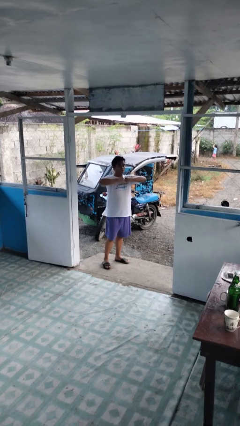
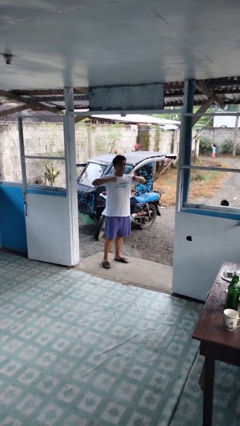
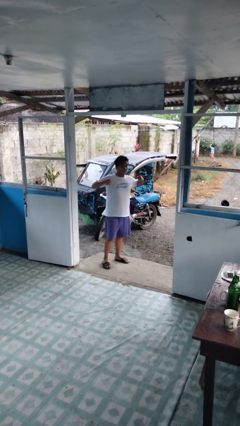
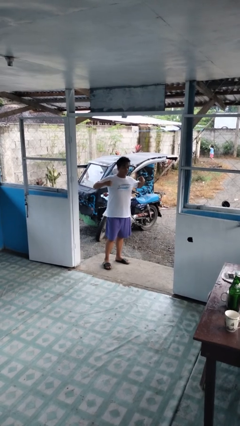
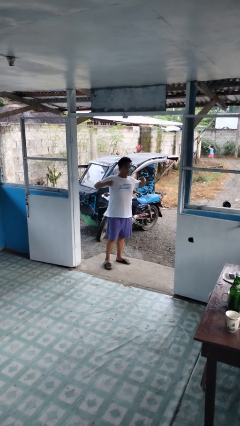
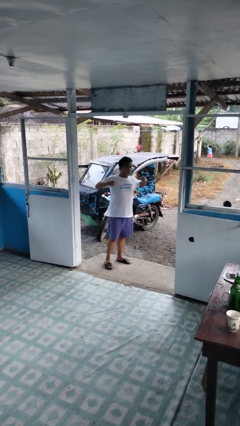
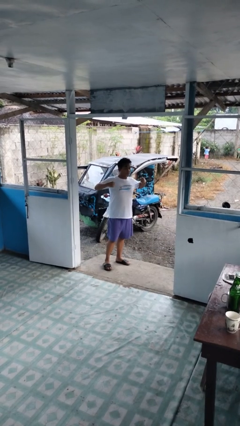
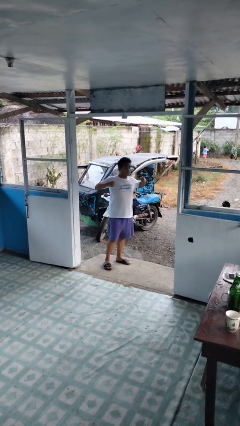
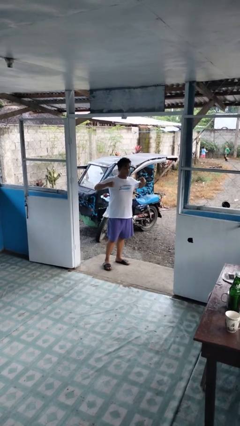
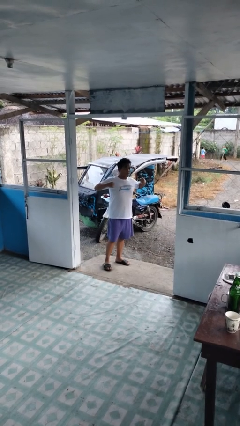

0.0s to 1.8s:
person gestures zoom in

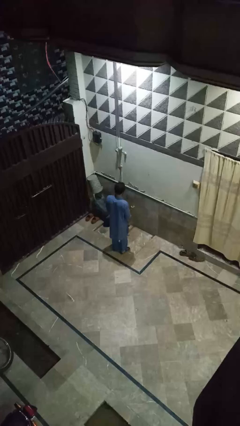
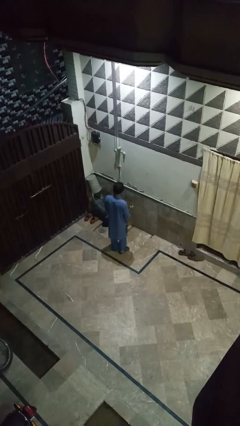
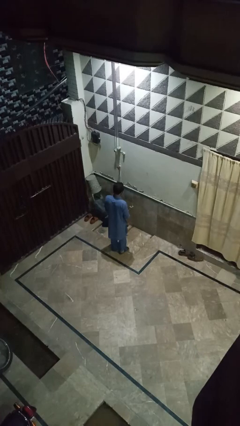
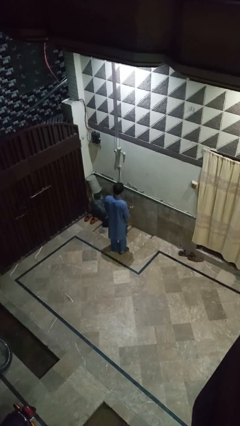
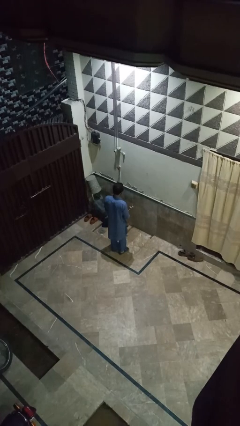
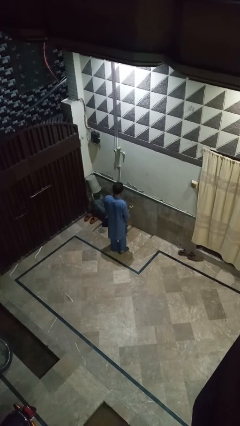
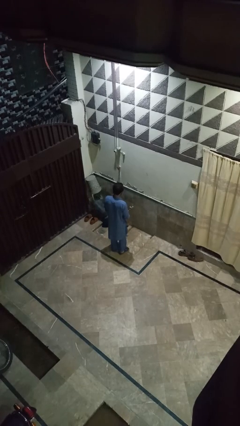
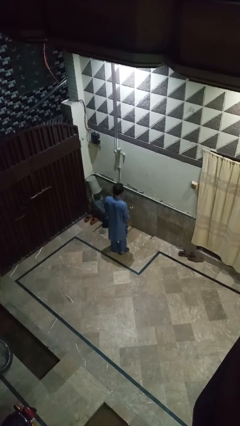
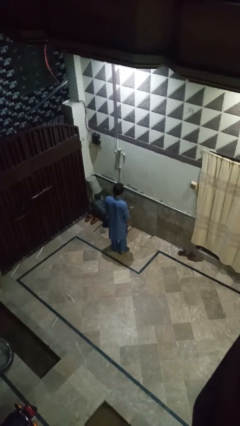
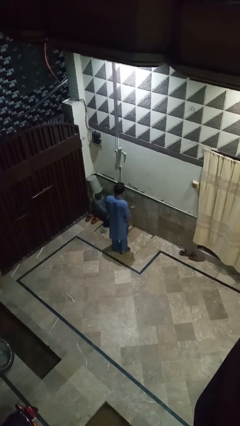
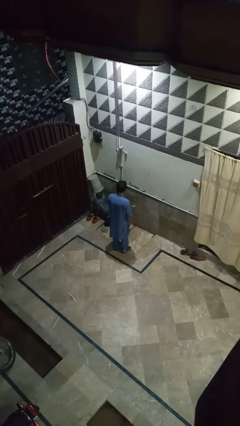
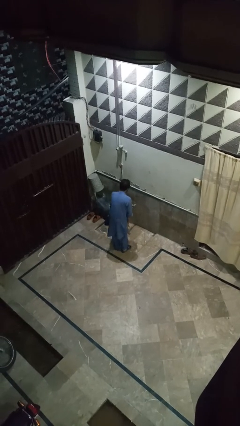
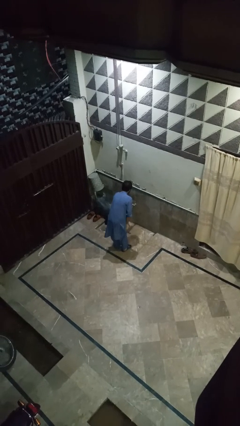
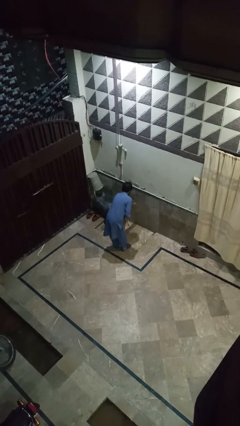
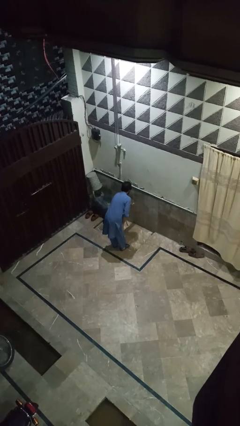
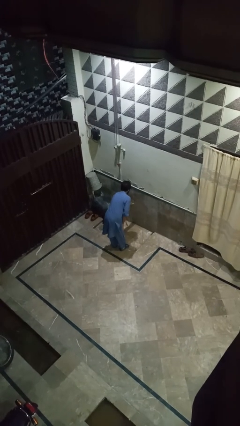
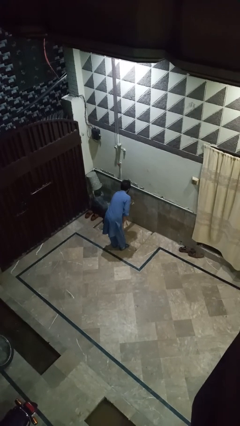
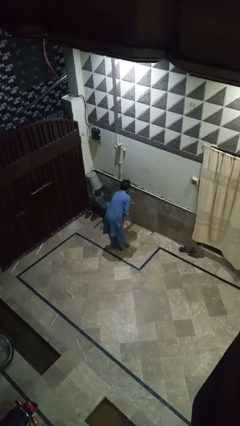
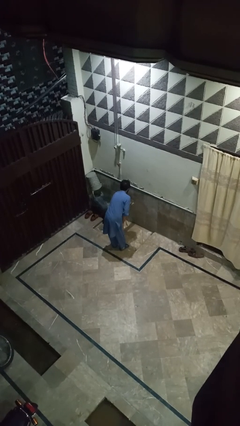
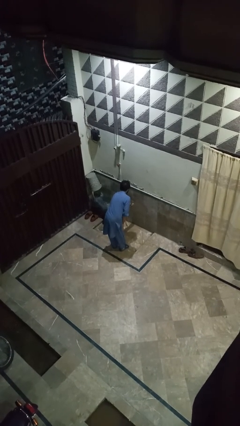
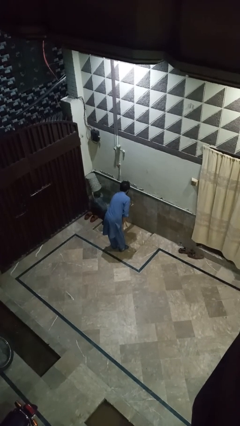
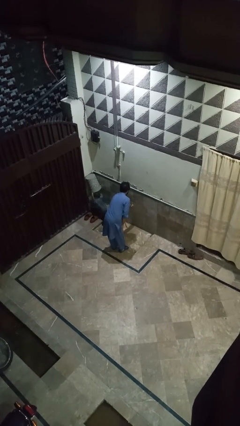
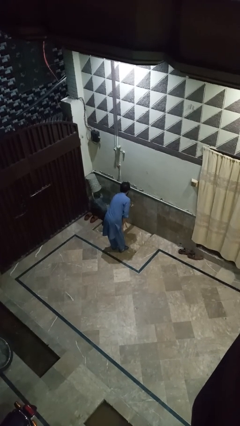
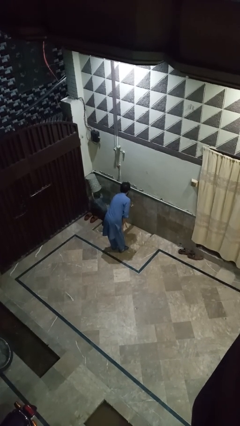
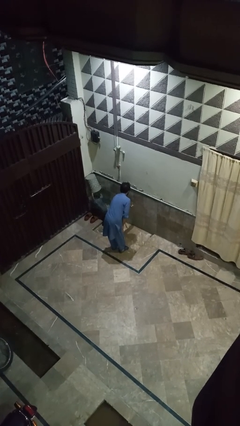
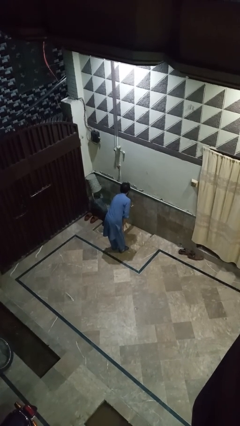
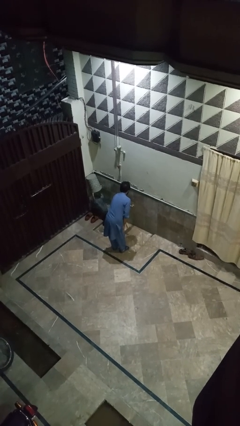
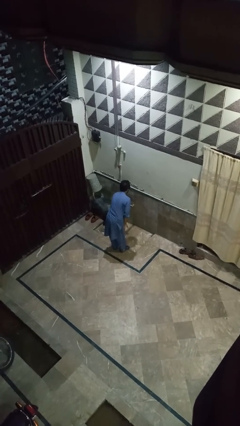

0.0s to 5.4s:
person turns on faucet

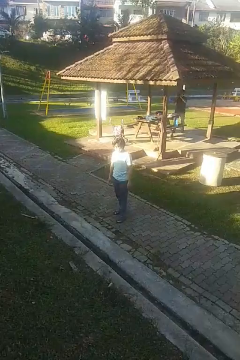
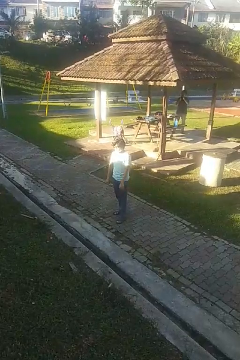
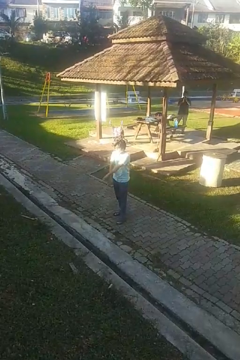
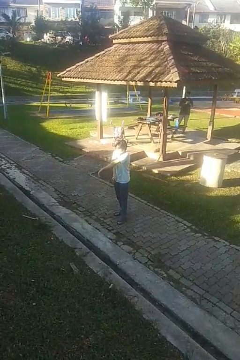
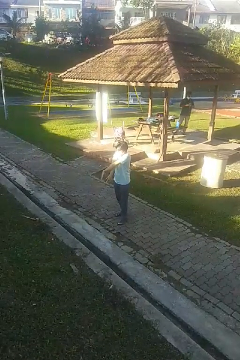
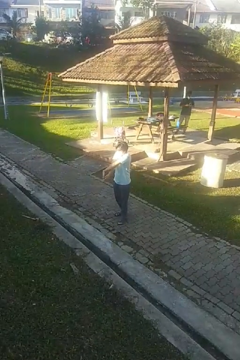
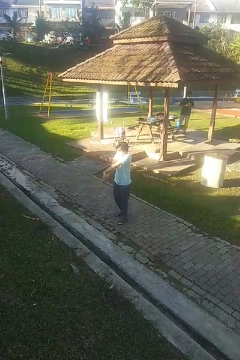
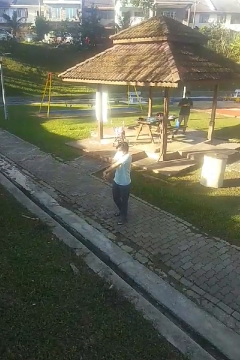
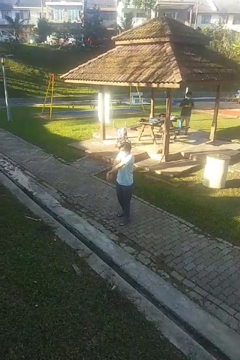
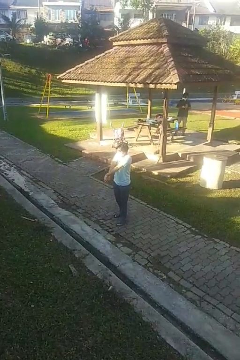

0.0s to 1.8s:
person crosses arms

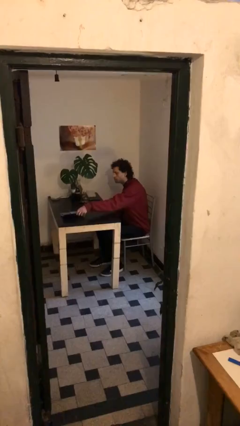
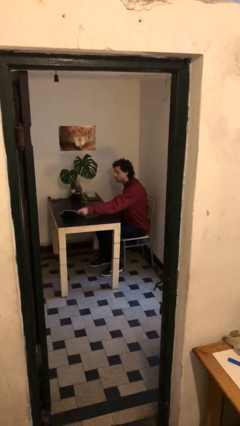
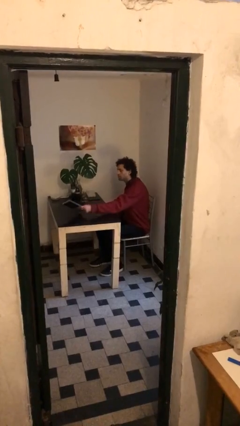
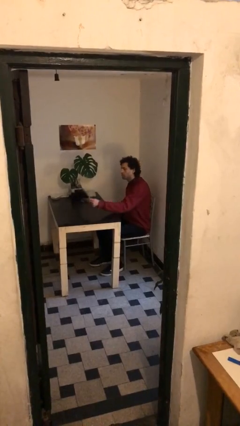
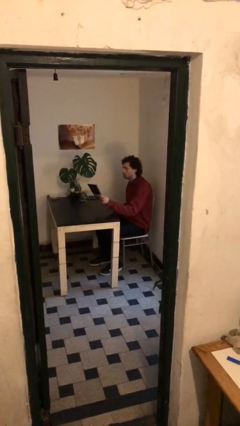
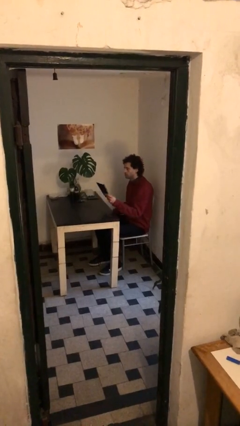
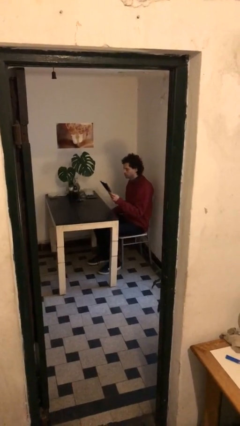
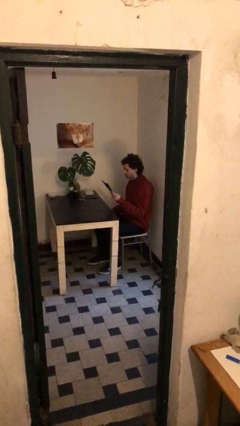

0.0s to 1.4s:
person picks up object from table

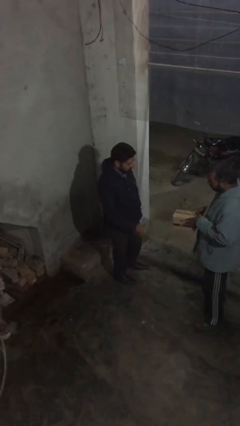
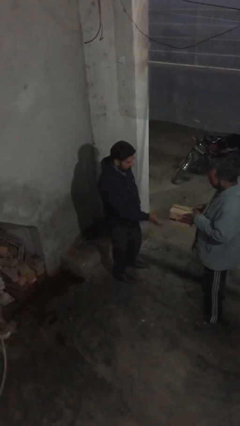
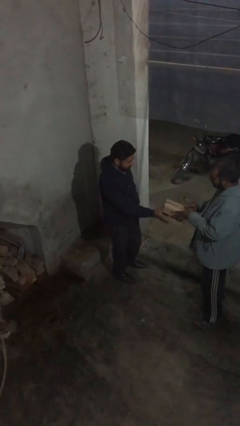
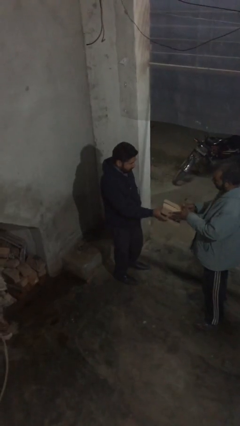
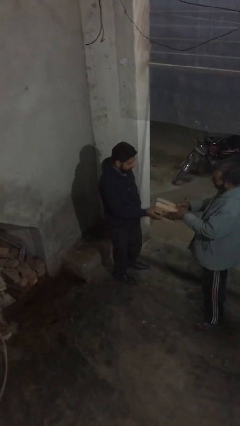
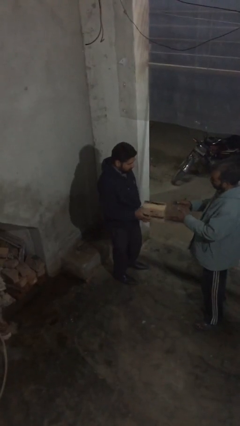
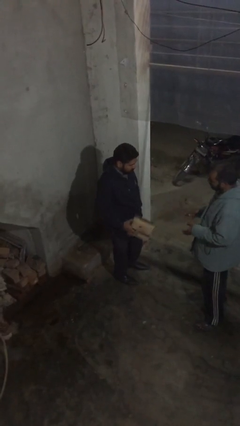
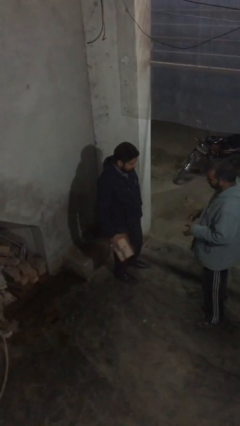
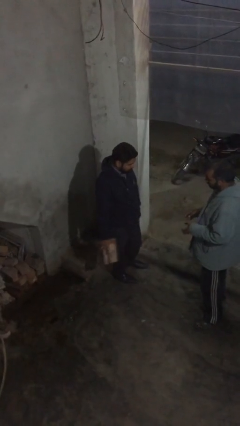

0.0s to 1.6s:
person transfers object to person

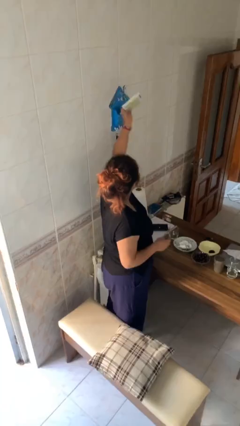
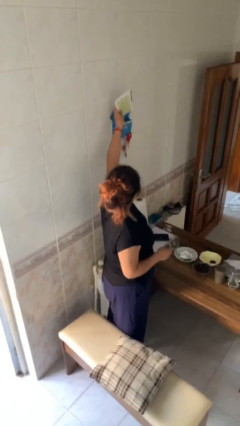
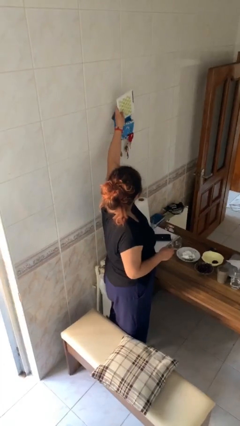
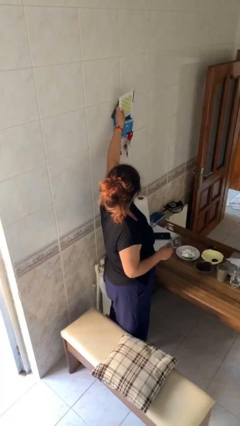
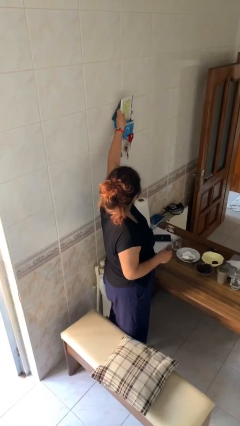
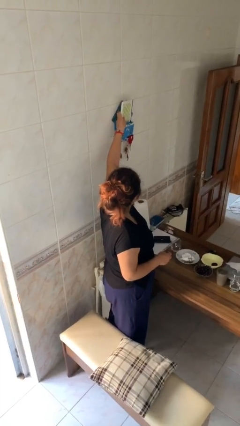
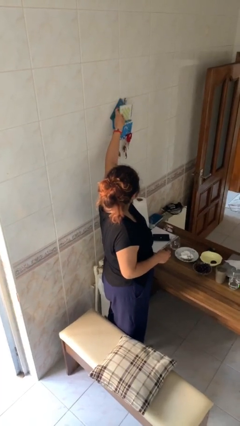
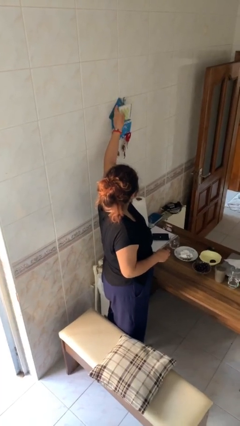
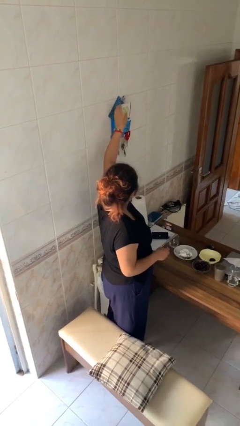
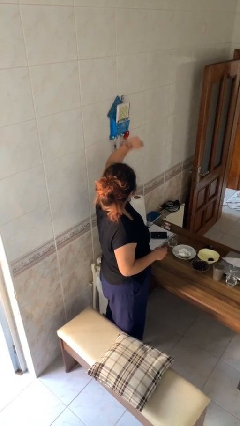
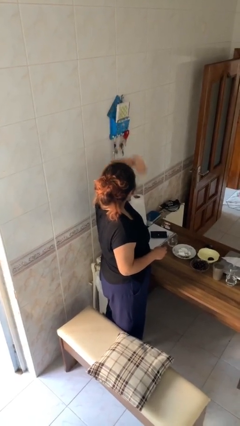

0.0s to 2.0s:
person puts down object on shelf

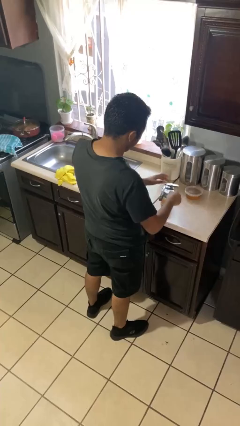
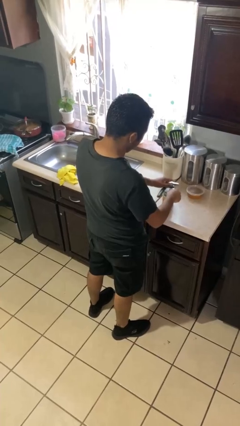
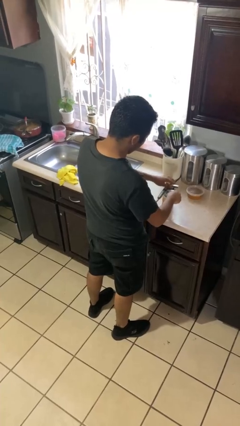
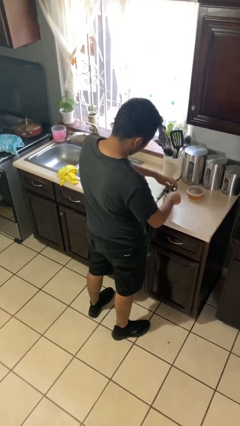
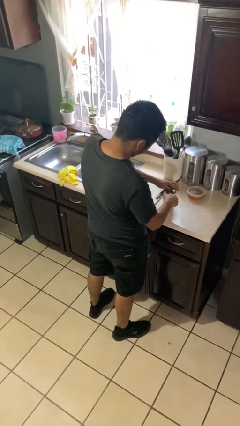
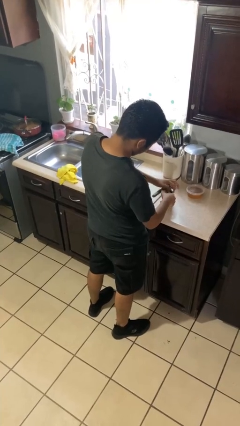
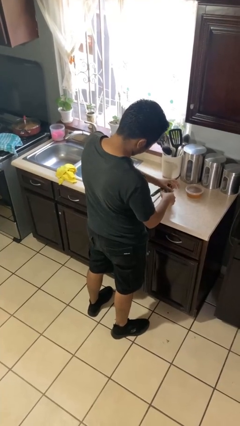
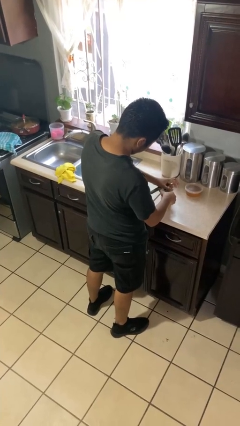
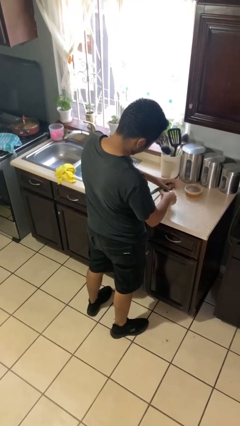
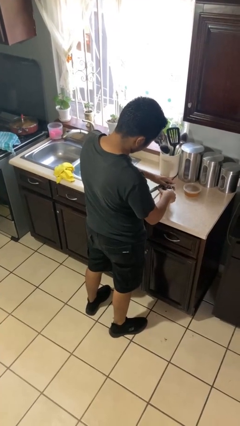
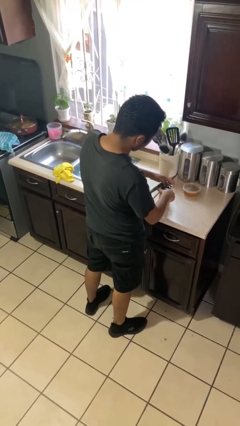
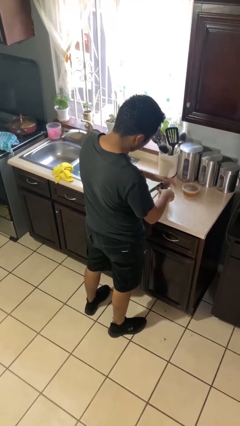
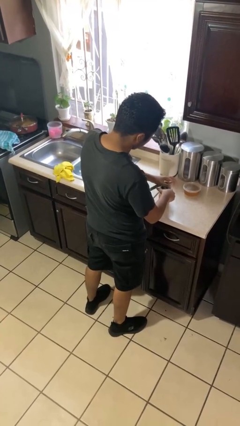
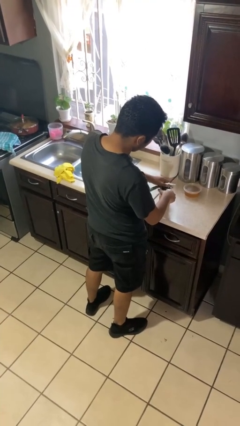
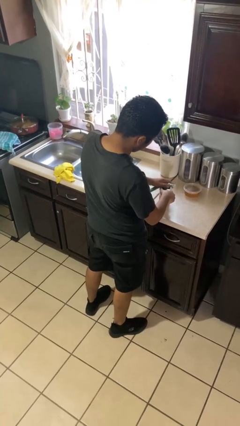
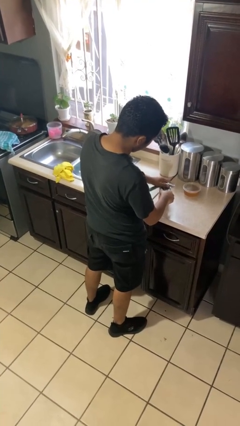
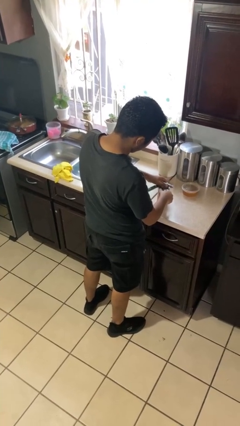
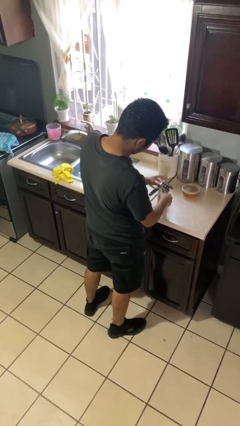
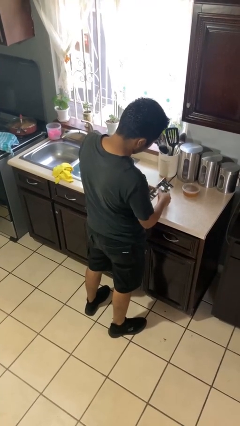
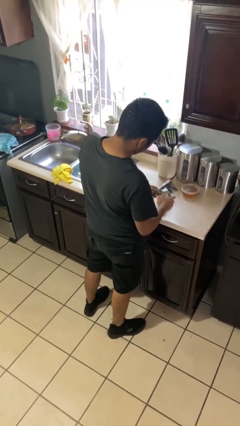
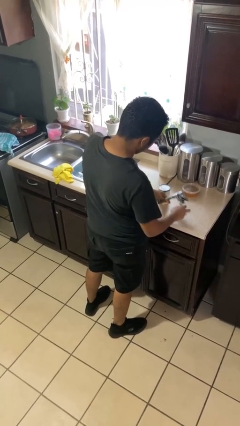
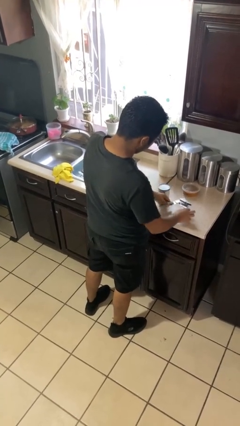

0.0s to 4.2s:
person opens can with can opener
